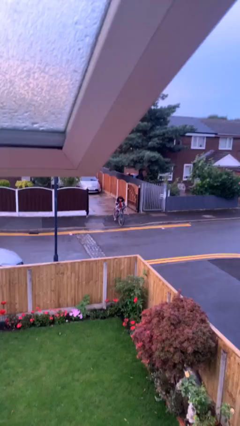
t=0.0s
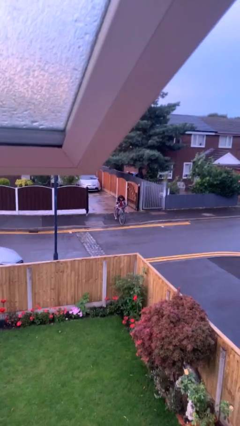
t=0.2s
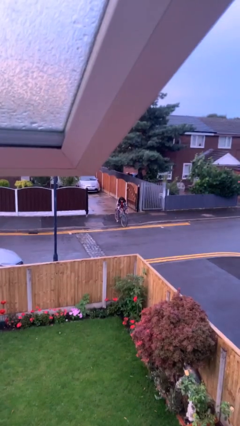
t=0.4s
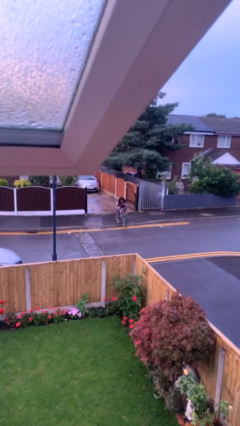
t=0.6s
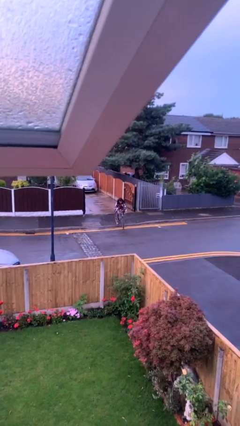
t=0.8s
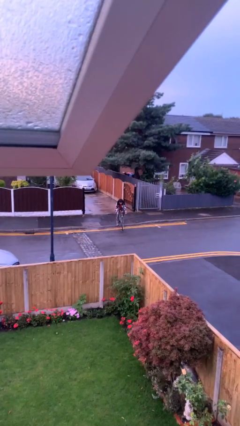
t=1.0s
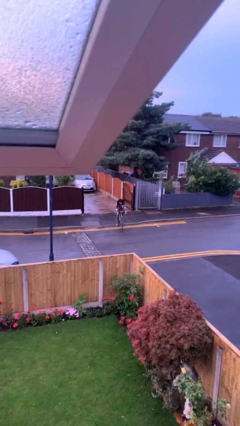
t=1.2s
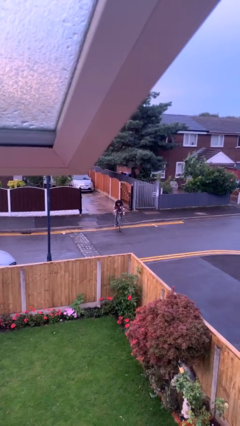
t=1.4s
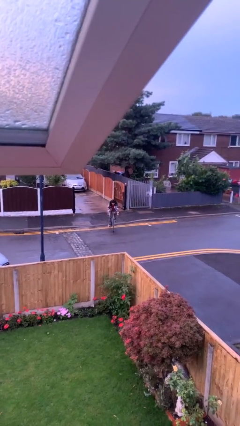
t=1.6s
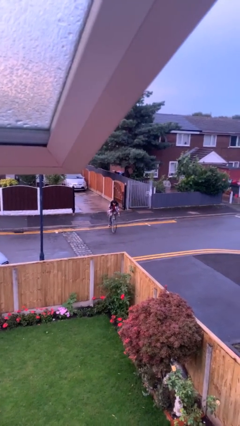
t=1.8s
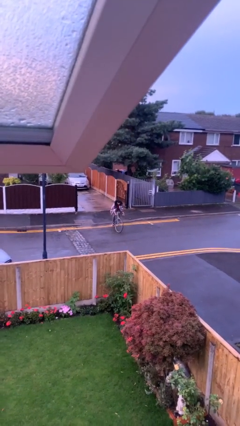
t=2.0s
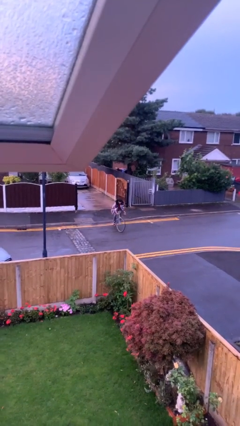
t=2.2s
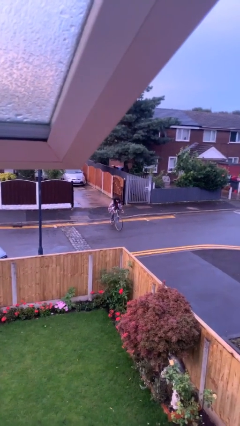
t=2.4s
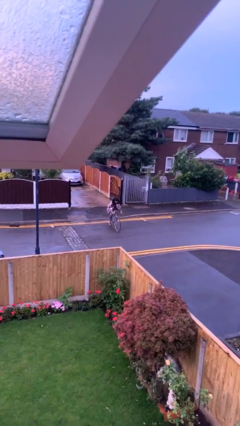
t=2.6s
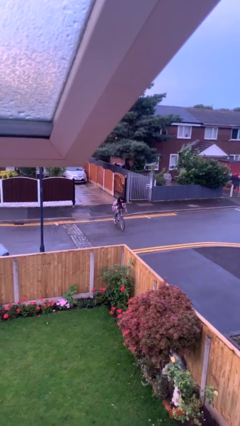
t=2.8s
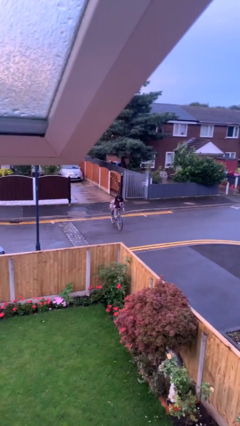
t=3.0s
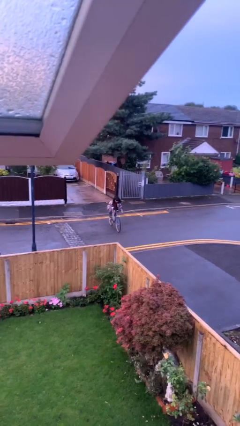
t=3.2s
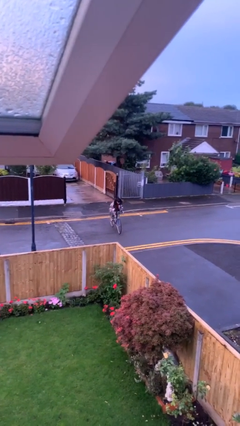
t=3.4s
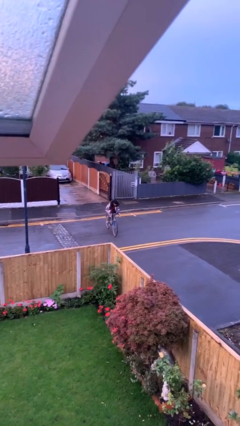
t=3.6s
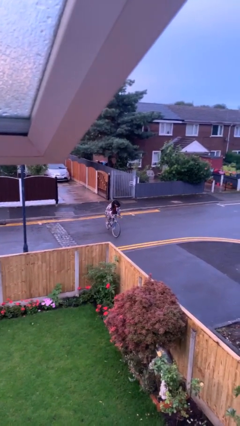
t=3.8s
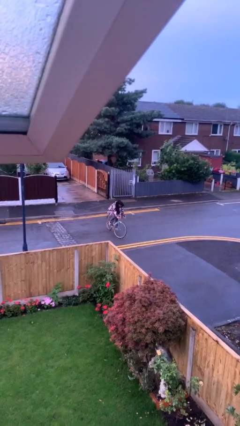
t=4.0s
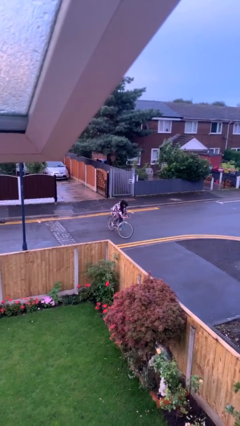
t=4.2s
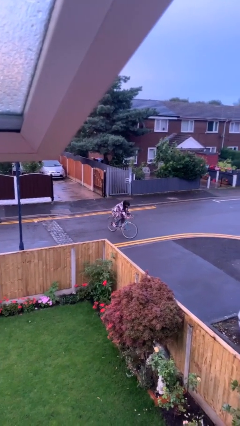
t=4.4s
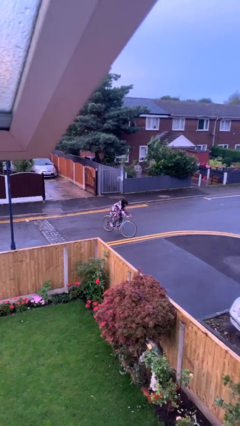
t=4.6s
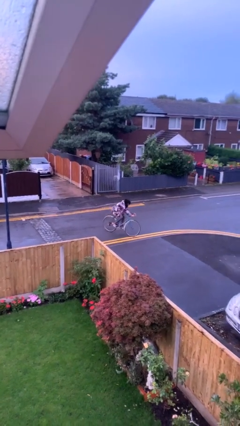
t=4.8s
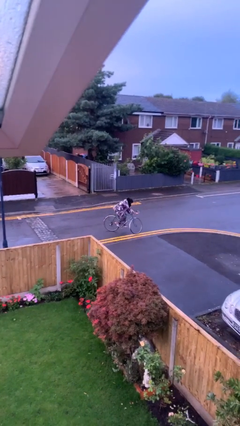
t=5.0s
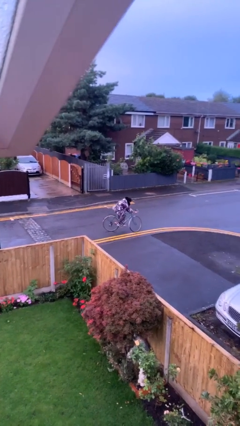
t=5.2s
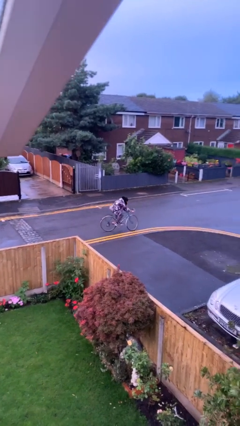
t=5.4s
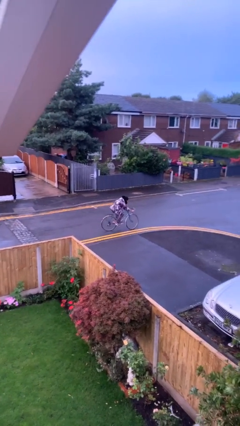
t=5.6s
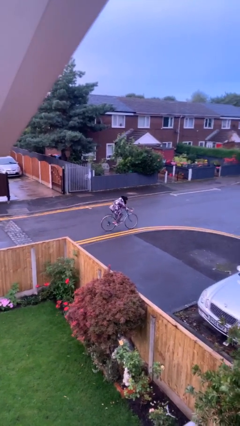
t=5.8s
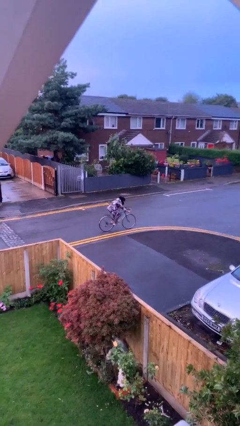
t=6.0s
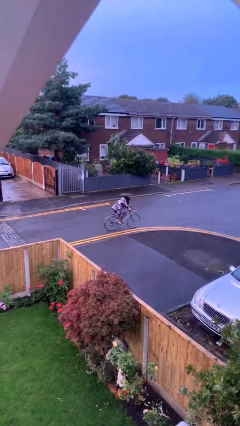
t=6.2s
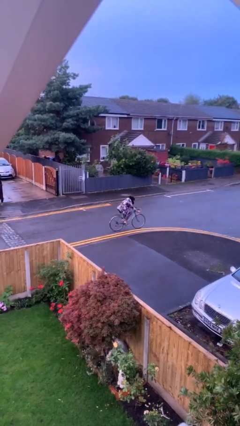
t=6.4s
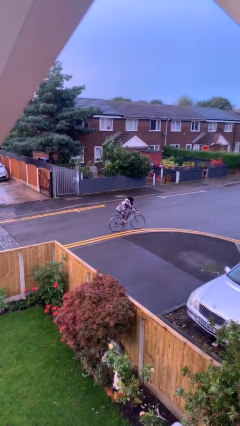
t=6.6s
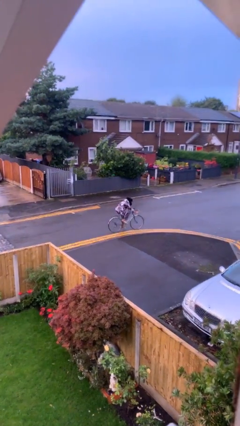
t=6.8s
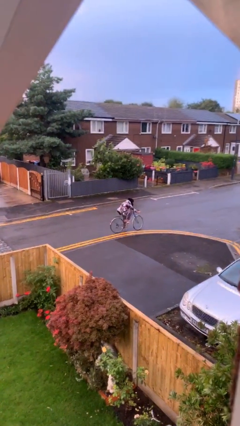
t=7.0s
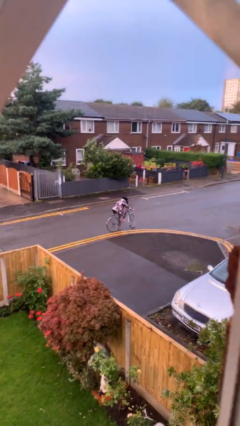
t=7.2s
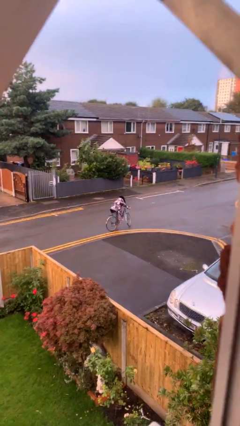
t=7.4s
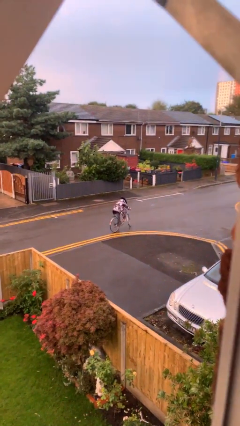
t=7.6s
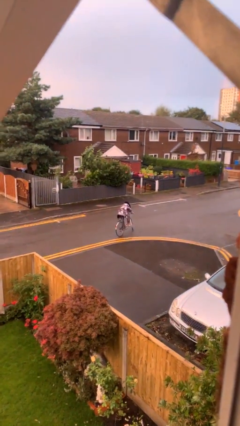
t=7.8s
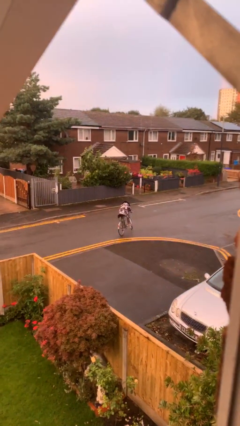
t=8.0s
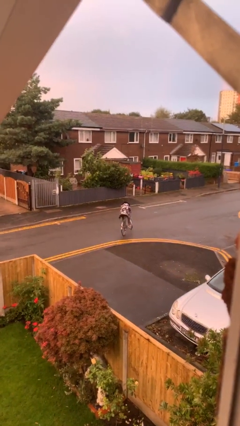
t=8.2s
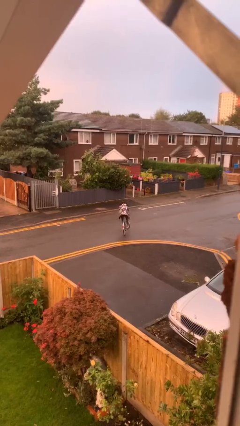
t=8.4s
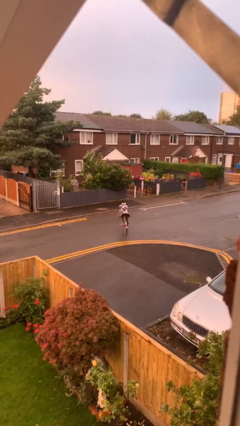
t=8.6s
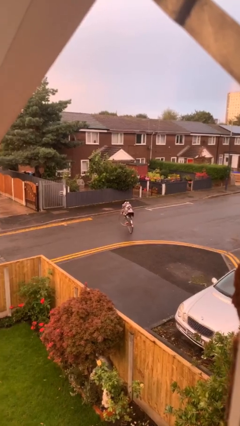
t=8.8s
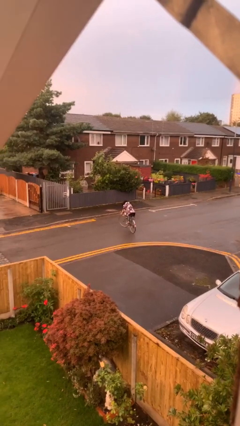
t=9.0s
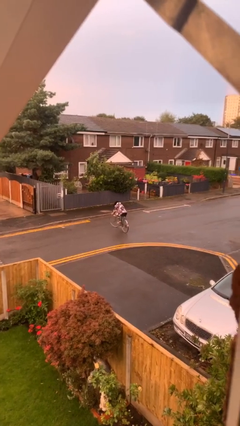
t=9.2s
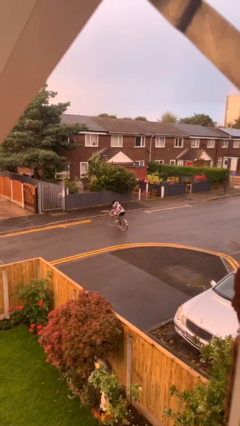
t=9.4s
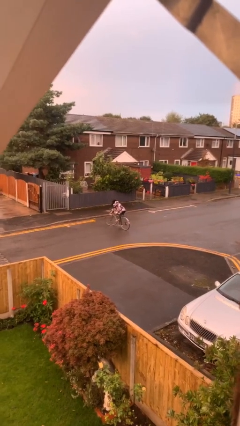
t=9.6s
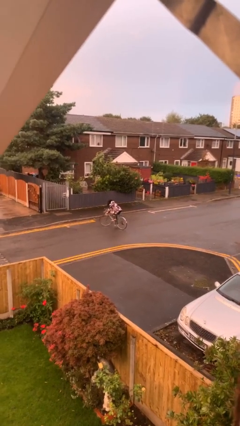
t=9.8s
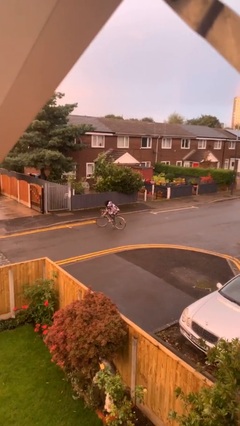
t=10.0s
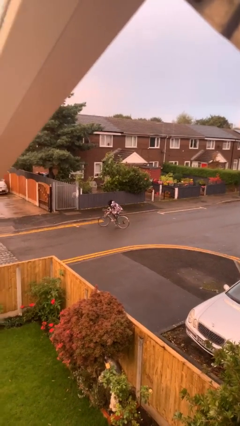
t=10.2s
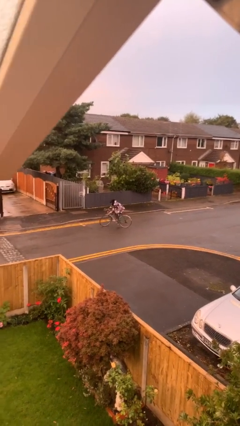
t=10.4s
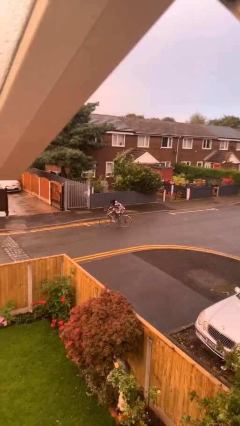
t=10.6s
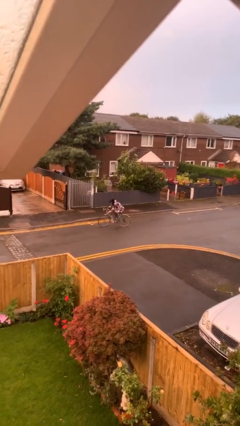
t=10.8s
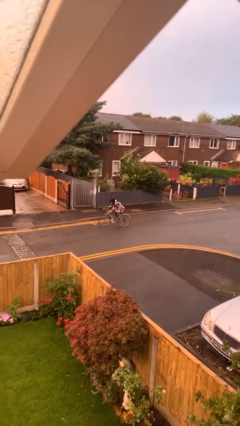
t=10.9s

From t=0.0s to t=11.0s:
person rides bicycle

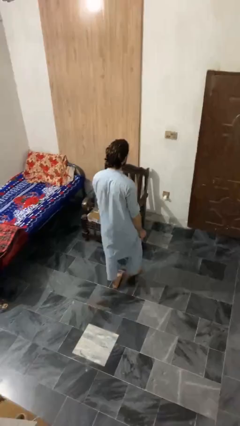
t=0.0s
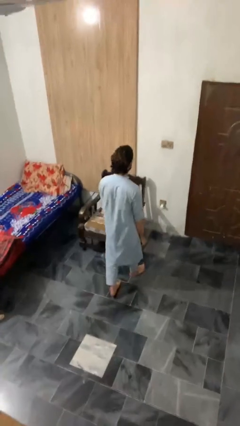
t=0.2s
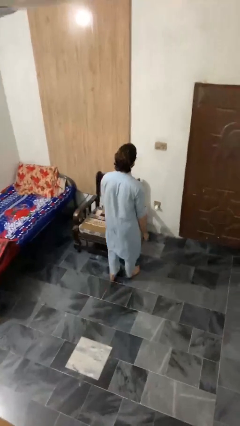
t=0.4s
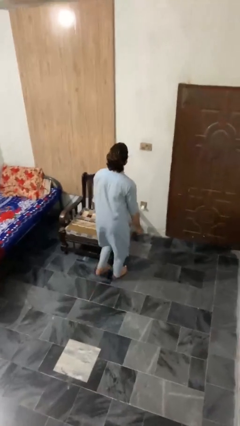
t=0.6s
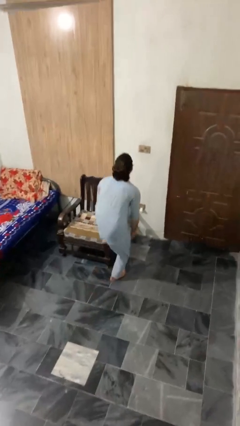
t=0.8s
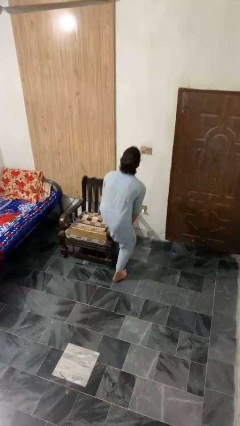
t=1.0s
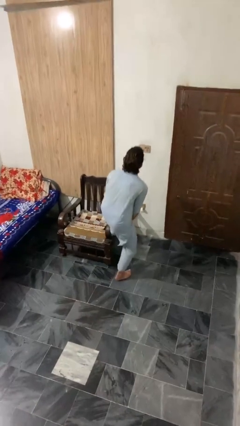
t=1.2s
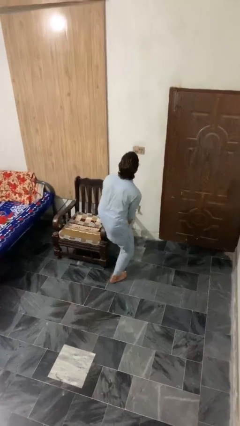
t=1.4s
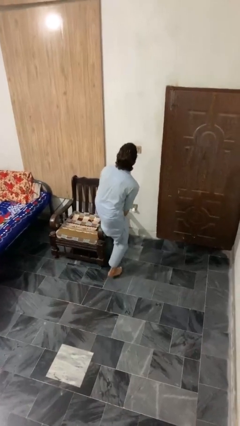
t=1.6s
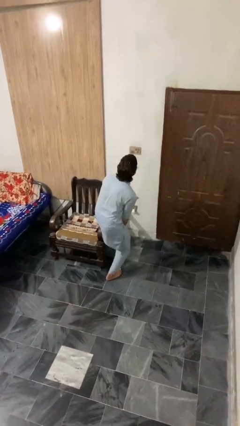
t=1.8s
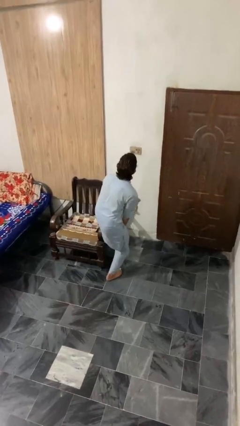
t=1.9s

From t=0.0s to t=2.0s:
person stubs toe

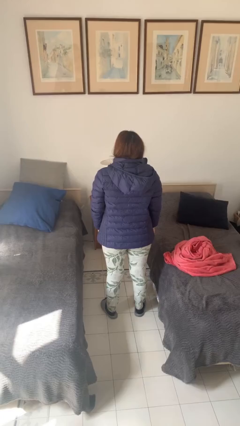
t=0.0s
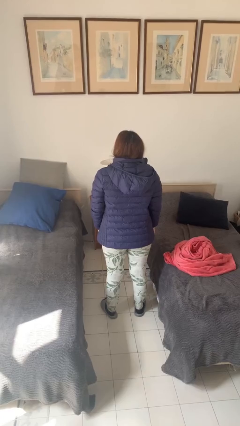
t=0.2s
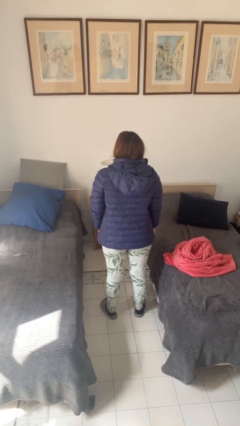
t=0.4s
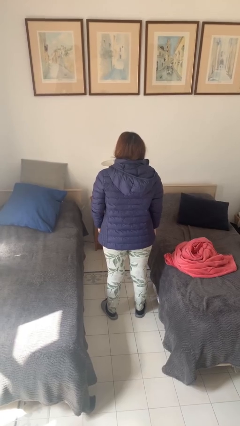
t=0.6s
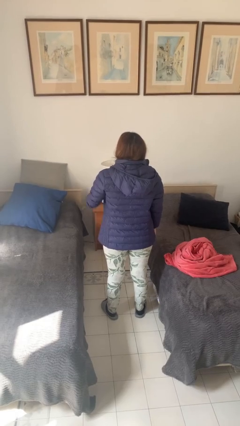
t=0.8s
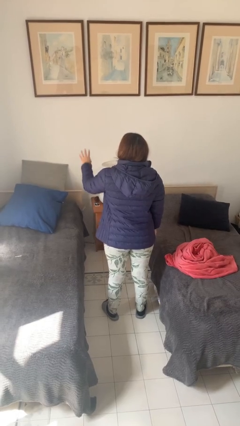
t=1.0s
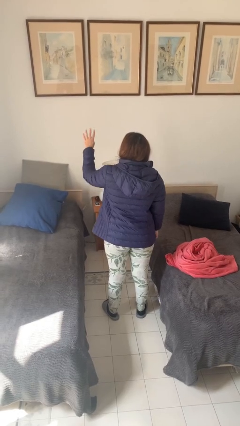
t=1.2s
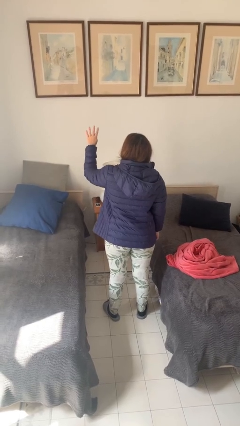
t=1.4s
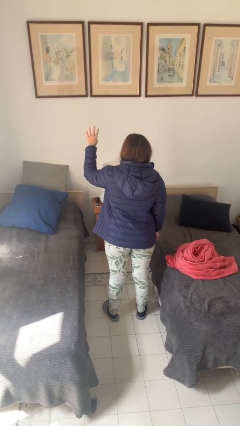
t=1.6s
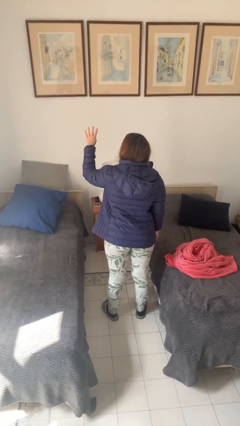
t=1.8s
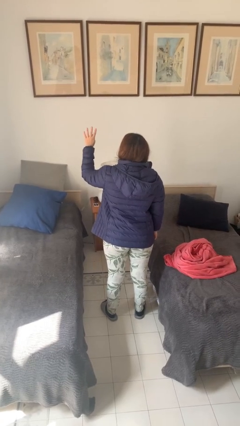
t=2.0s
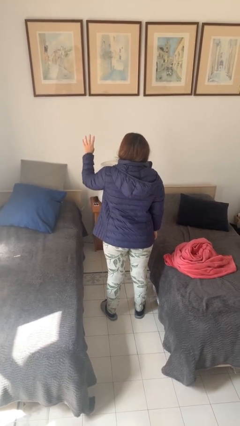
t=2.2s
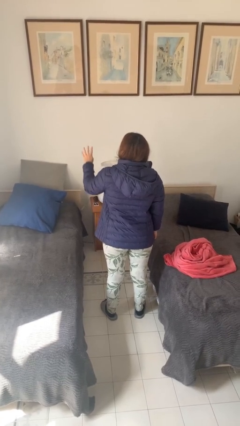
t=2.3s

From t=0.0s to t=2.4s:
person gestures number four

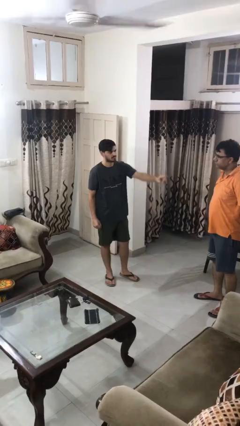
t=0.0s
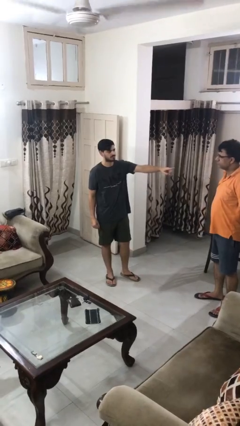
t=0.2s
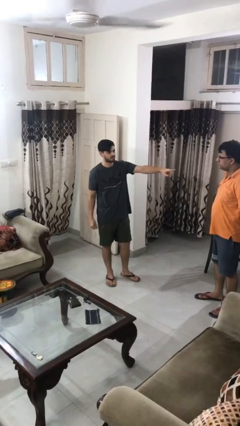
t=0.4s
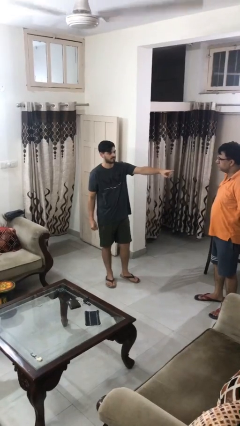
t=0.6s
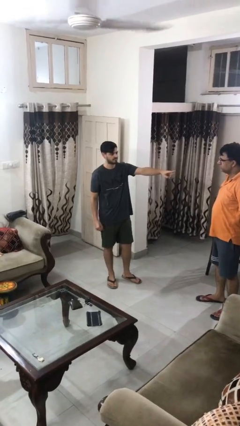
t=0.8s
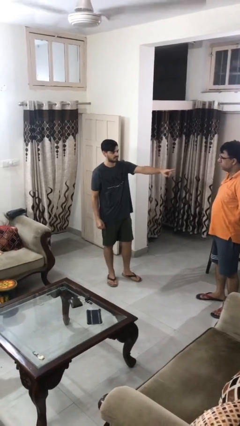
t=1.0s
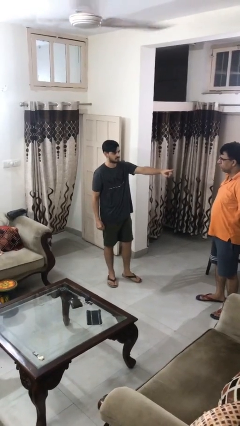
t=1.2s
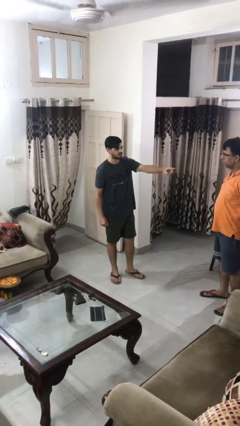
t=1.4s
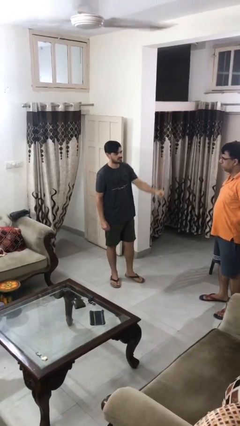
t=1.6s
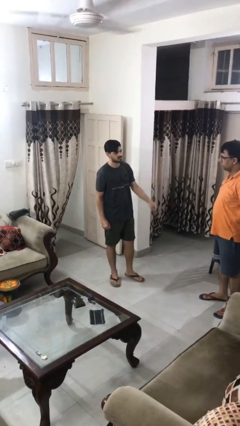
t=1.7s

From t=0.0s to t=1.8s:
person points at person

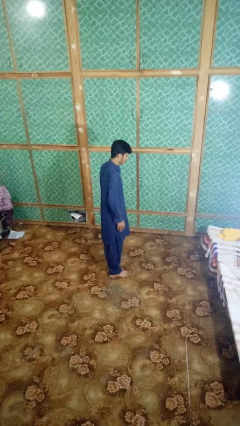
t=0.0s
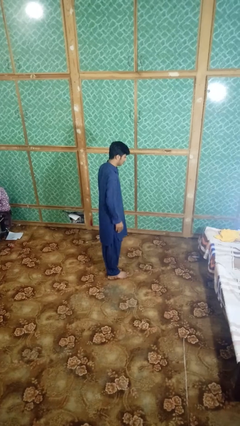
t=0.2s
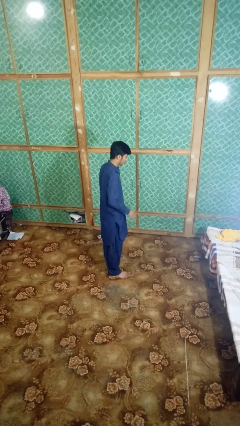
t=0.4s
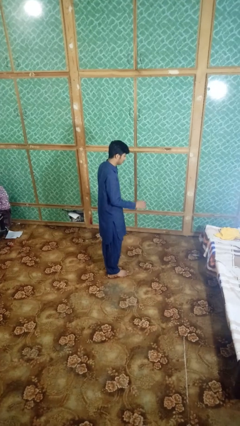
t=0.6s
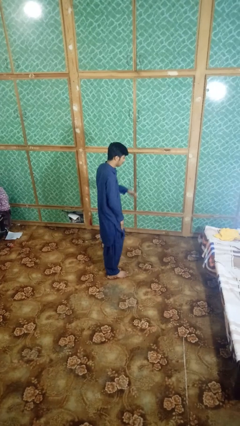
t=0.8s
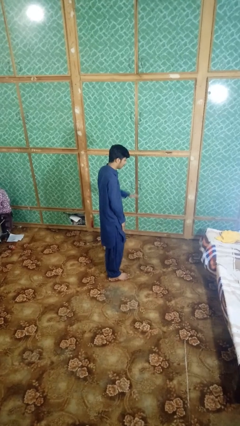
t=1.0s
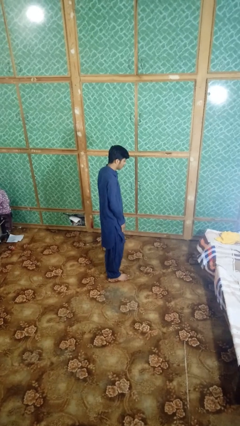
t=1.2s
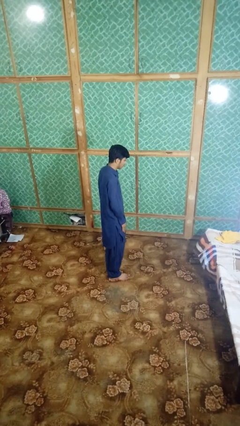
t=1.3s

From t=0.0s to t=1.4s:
person slaps hands on thighs
